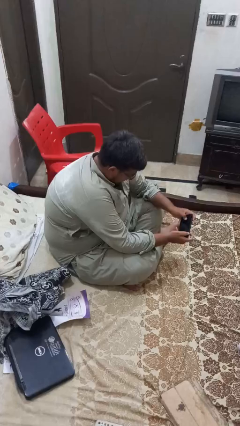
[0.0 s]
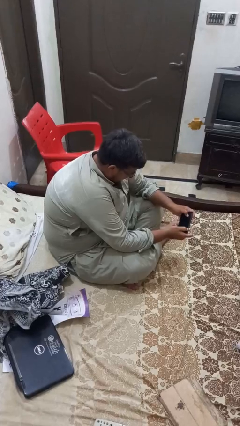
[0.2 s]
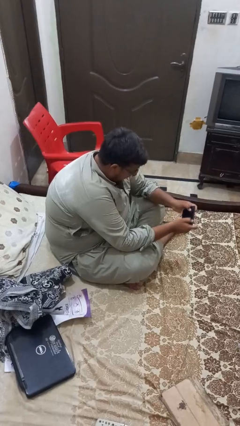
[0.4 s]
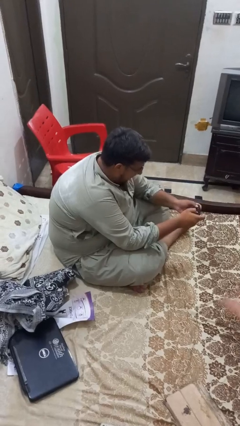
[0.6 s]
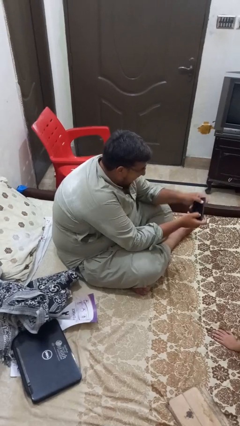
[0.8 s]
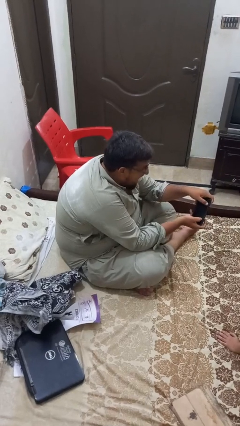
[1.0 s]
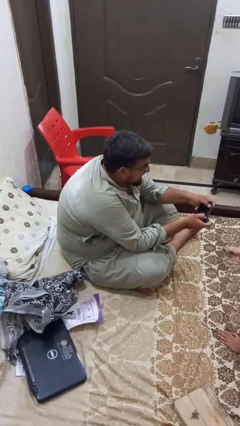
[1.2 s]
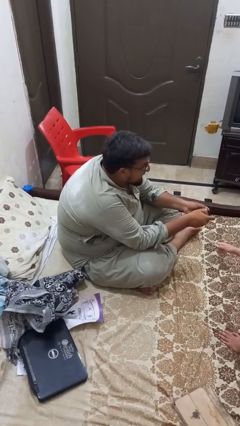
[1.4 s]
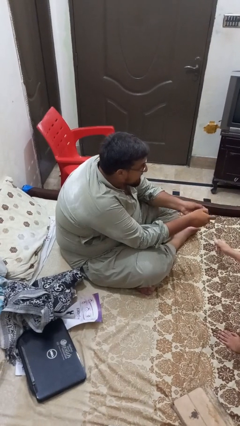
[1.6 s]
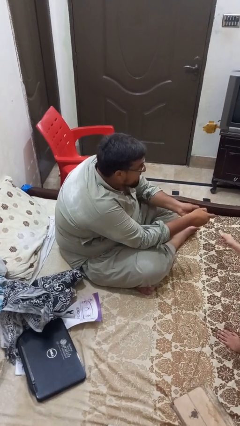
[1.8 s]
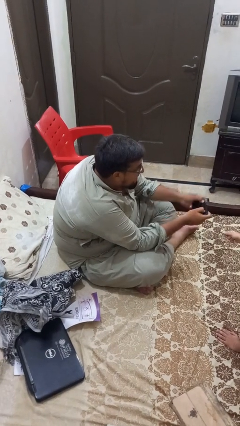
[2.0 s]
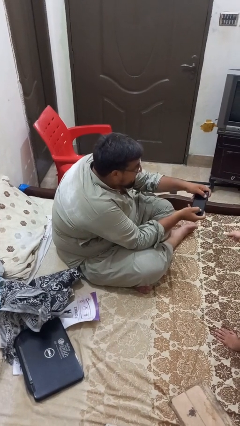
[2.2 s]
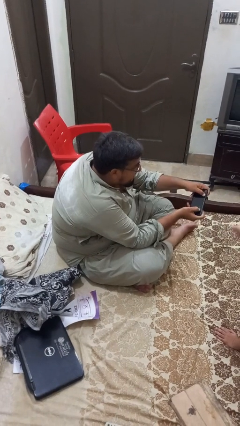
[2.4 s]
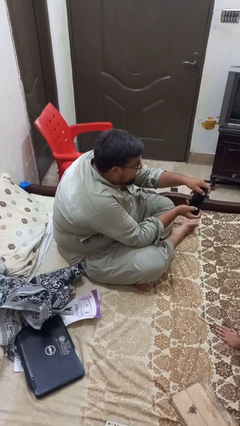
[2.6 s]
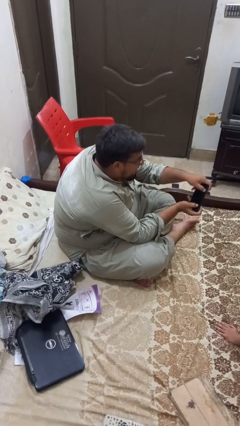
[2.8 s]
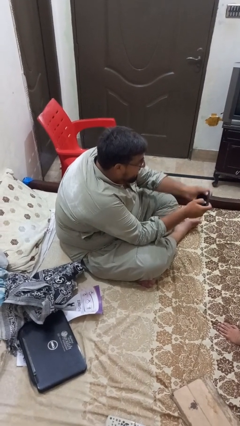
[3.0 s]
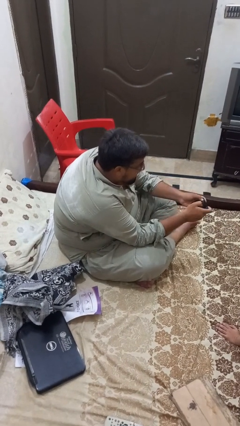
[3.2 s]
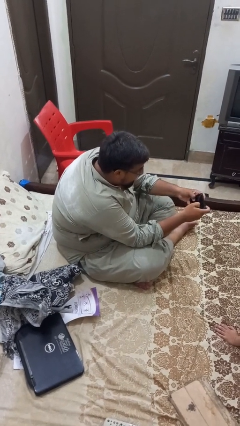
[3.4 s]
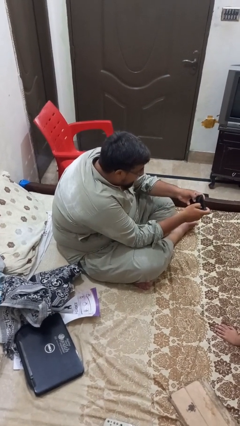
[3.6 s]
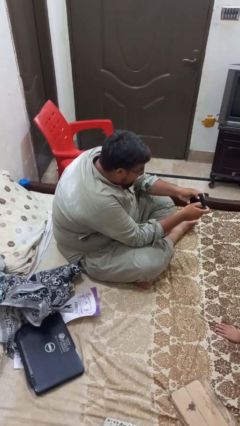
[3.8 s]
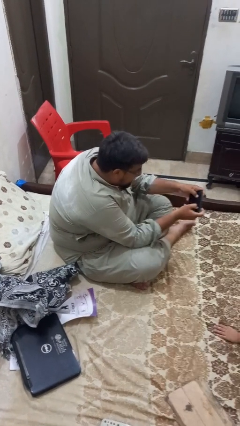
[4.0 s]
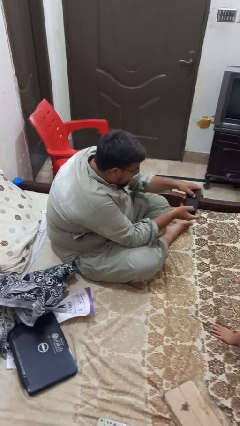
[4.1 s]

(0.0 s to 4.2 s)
person interacts with handheld game

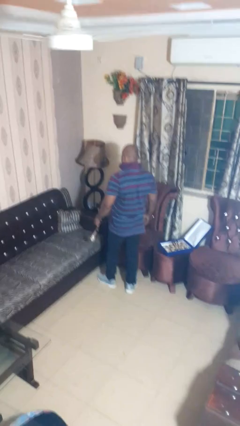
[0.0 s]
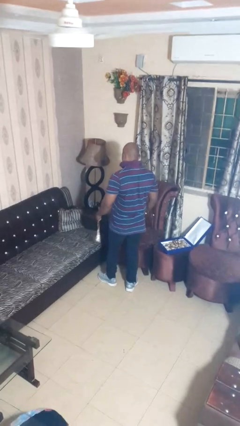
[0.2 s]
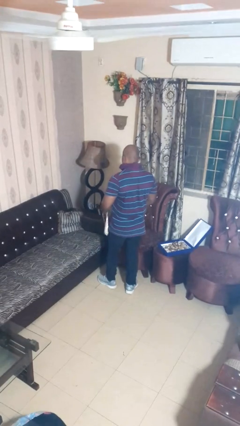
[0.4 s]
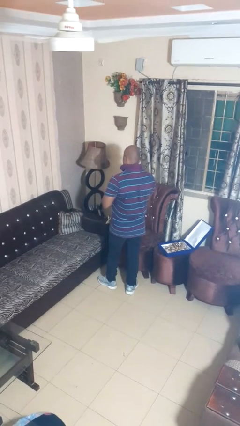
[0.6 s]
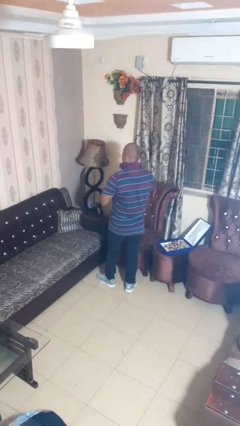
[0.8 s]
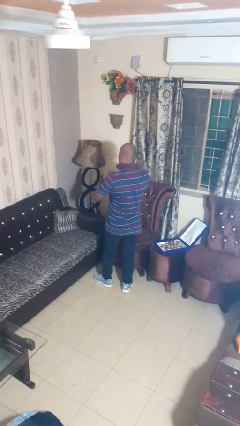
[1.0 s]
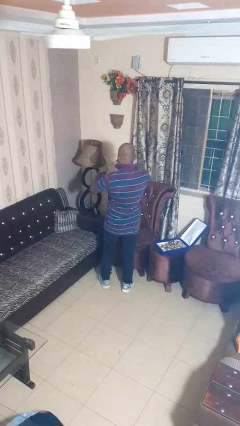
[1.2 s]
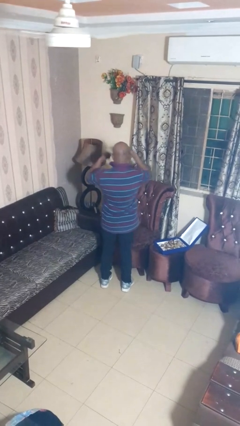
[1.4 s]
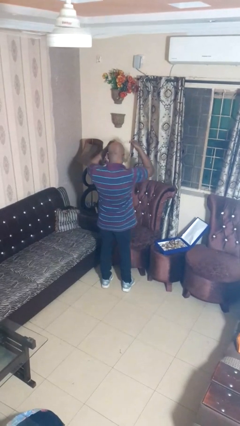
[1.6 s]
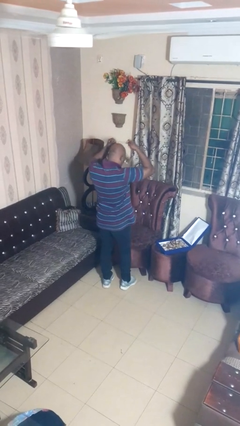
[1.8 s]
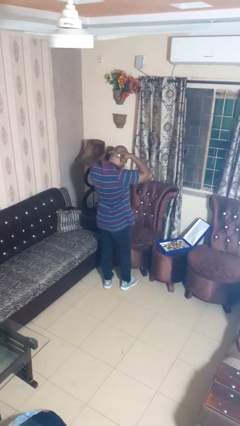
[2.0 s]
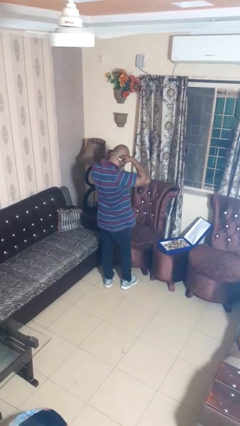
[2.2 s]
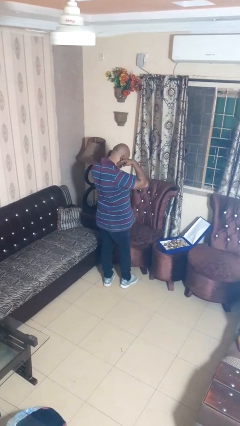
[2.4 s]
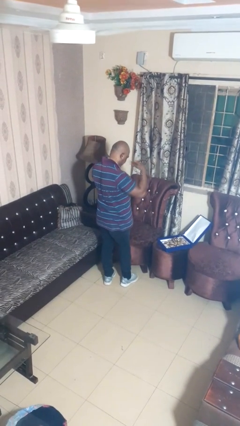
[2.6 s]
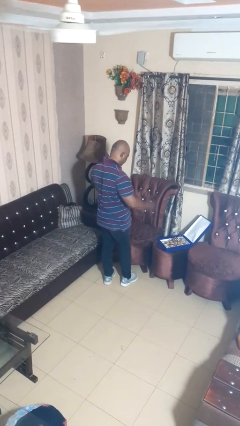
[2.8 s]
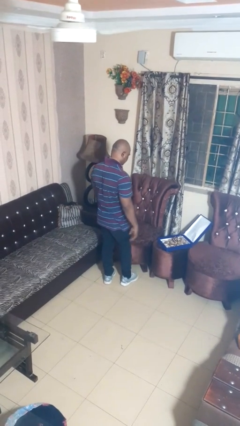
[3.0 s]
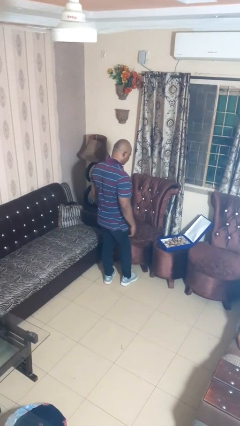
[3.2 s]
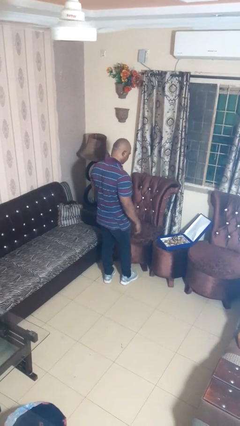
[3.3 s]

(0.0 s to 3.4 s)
person puts on necklace

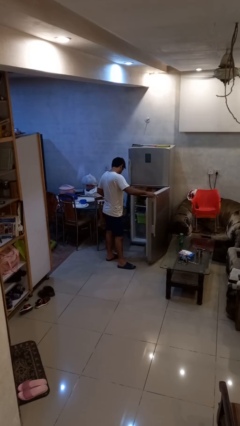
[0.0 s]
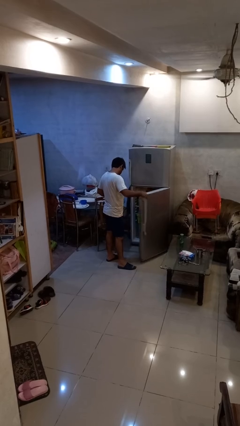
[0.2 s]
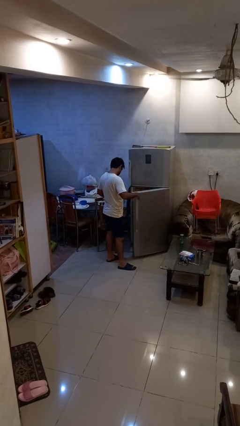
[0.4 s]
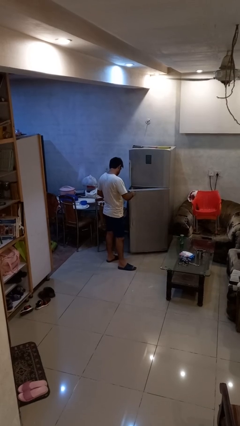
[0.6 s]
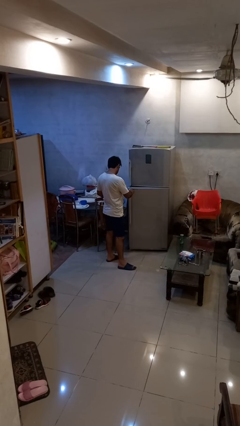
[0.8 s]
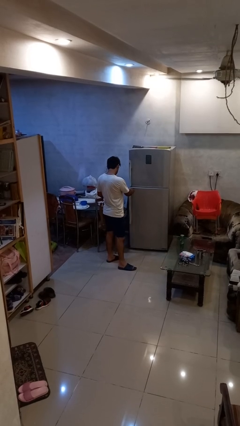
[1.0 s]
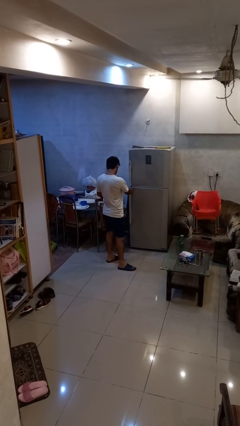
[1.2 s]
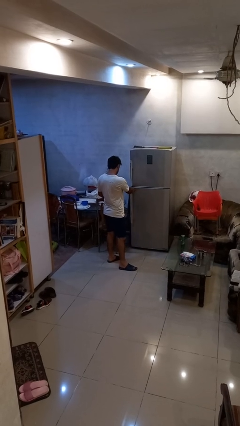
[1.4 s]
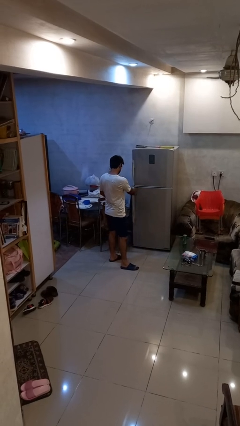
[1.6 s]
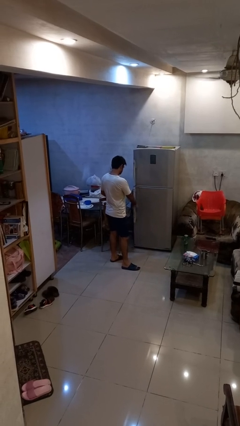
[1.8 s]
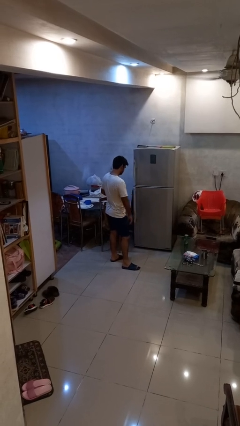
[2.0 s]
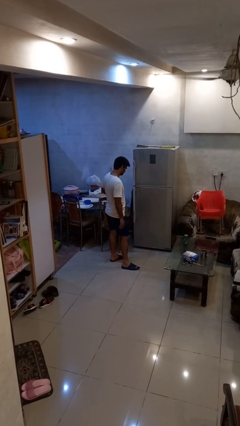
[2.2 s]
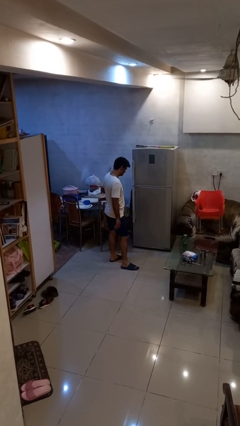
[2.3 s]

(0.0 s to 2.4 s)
person closes refrigerator

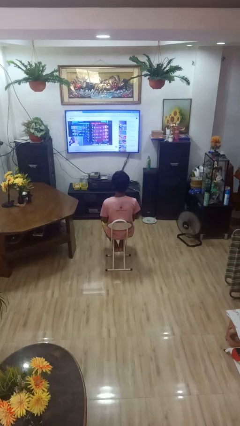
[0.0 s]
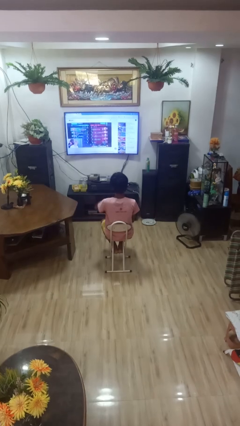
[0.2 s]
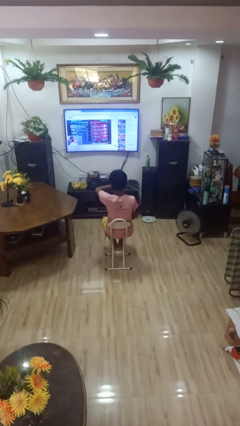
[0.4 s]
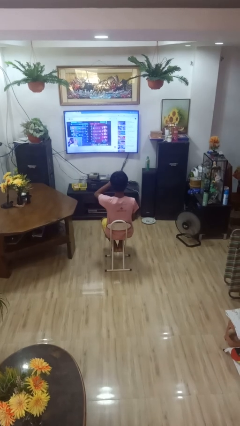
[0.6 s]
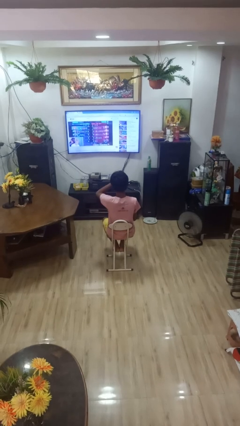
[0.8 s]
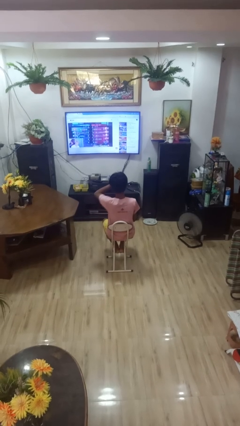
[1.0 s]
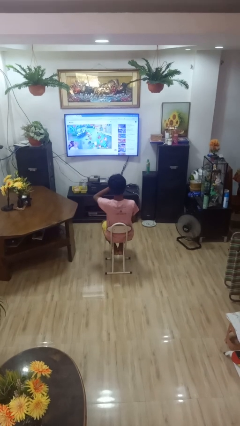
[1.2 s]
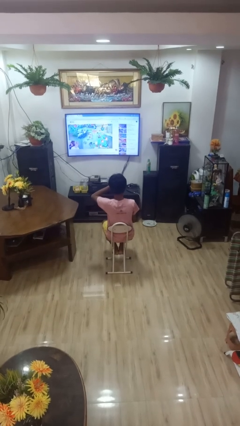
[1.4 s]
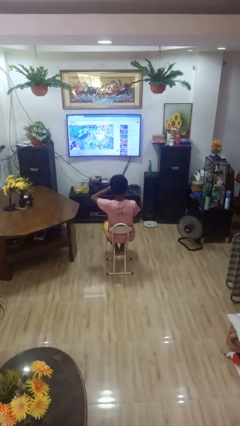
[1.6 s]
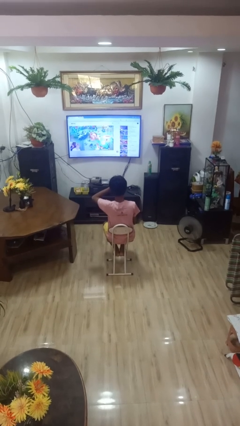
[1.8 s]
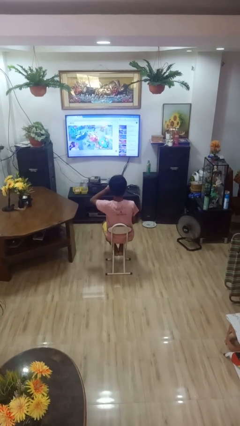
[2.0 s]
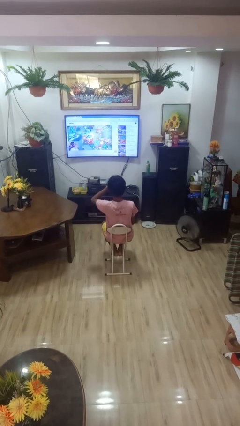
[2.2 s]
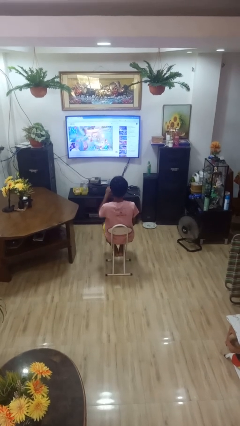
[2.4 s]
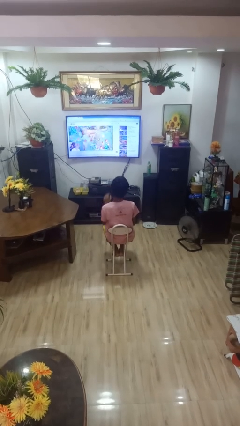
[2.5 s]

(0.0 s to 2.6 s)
person rubs eyes

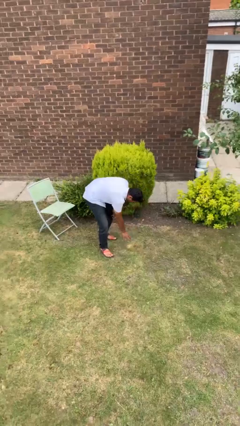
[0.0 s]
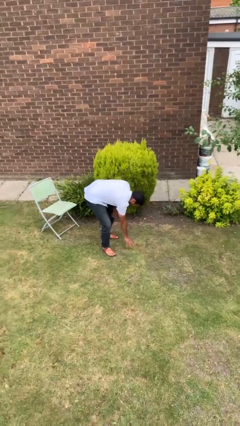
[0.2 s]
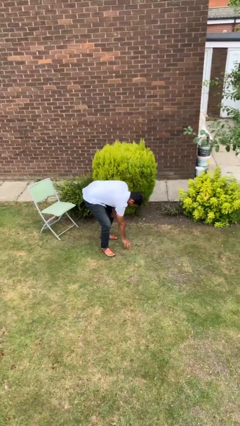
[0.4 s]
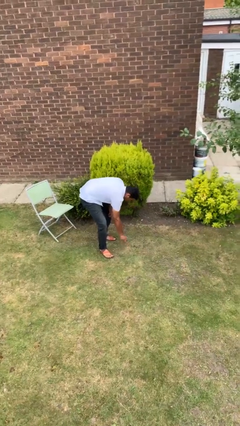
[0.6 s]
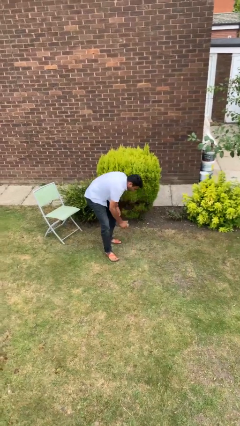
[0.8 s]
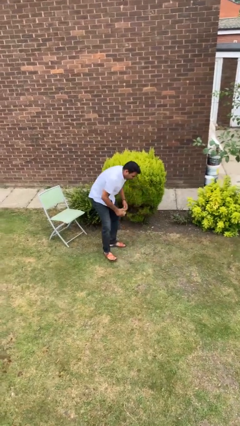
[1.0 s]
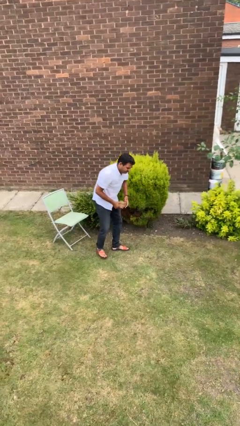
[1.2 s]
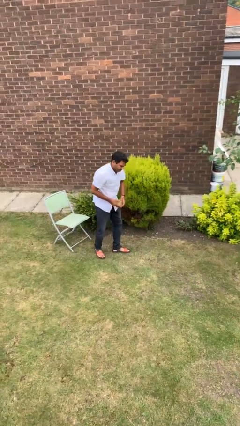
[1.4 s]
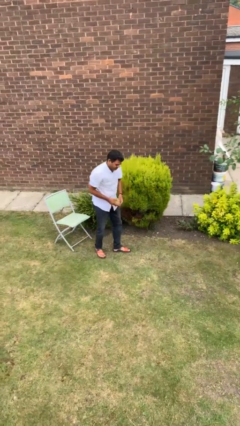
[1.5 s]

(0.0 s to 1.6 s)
person picks up object from floor

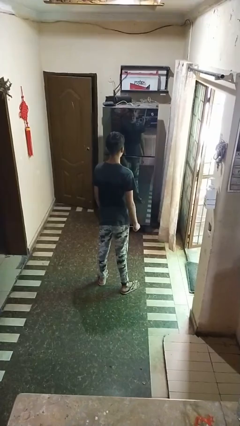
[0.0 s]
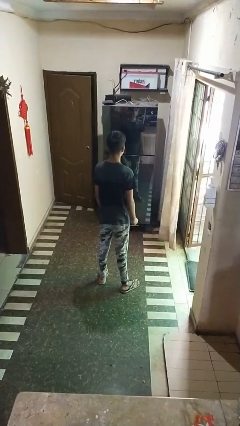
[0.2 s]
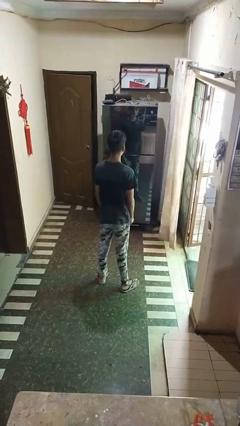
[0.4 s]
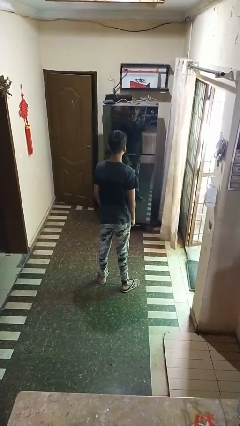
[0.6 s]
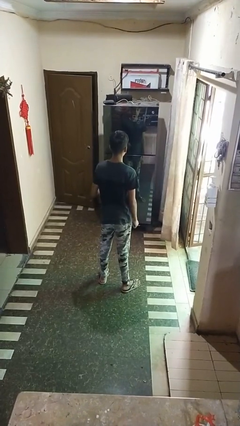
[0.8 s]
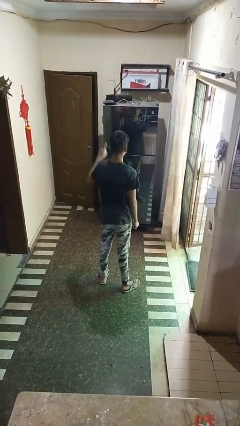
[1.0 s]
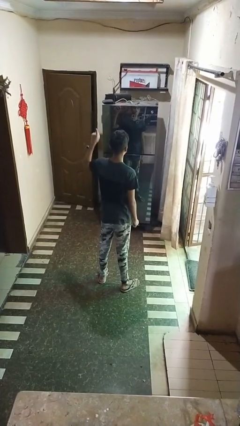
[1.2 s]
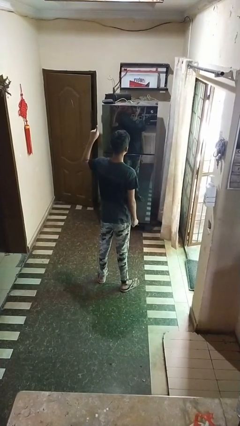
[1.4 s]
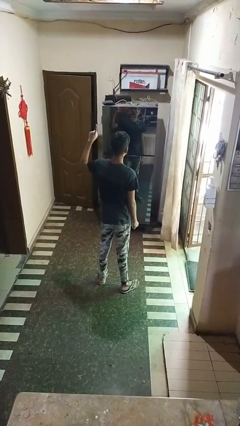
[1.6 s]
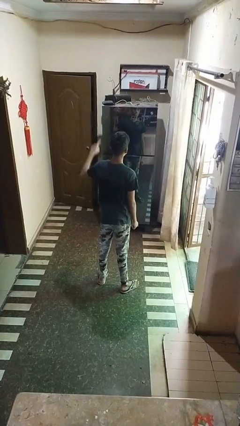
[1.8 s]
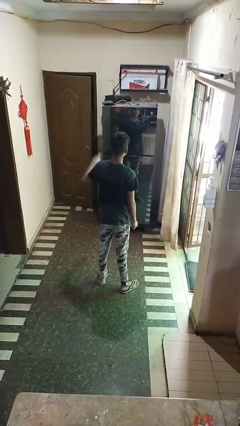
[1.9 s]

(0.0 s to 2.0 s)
person gestures number one

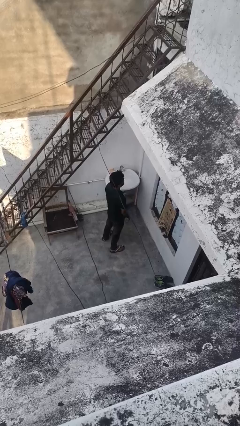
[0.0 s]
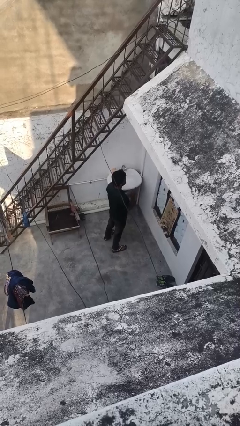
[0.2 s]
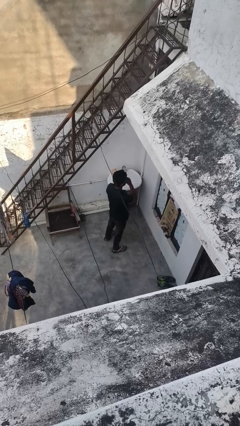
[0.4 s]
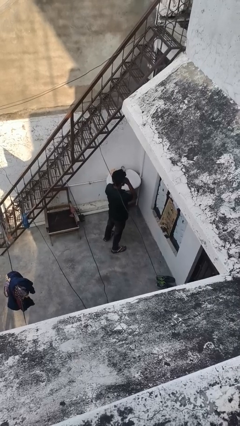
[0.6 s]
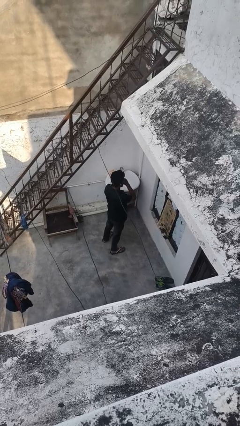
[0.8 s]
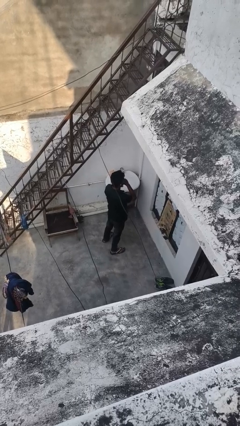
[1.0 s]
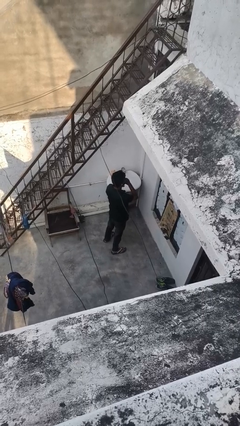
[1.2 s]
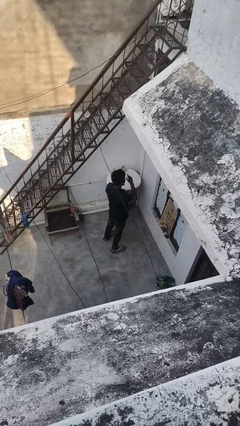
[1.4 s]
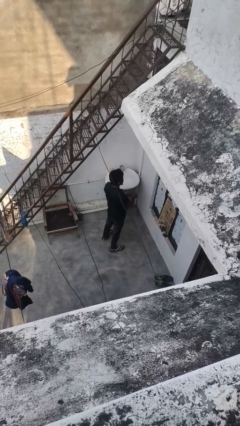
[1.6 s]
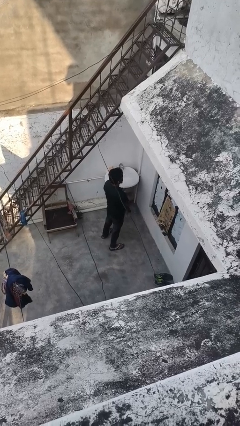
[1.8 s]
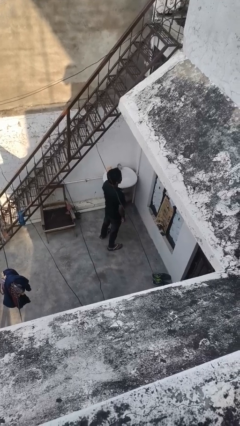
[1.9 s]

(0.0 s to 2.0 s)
person gestures be quiet
